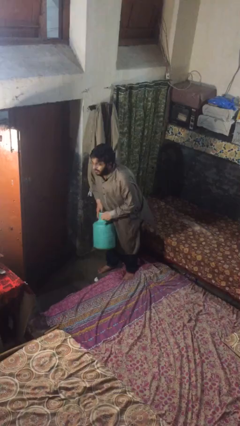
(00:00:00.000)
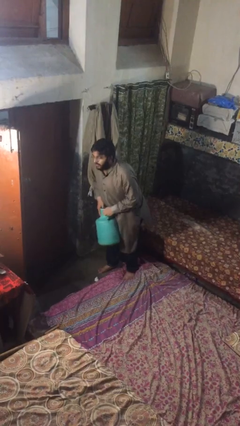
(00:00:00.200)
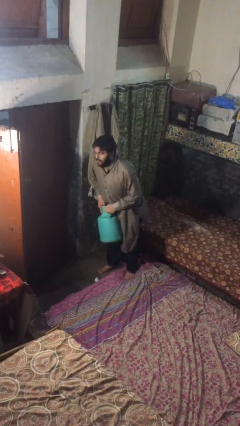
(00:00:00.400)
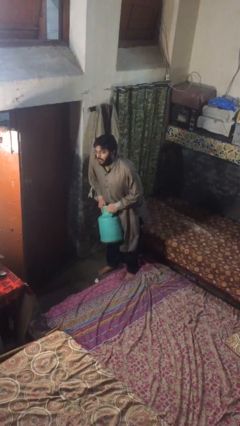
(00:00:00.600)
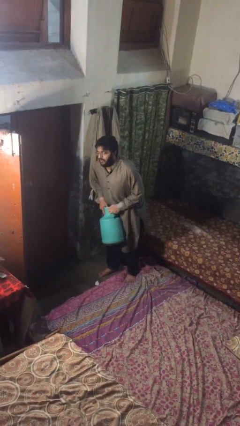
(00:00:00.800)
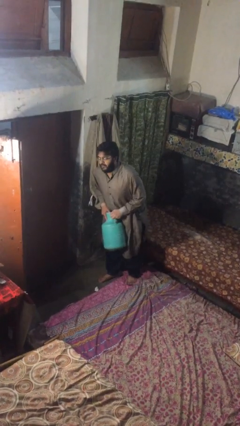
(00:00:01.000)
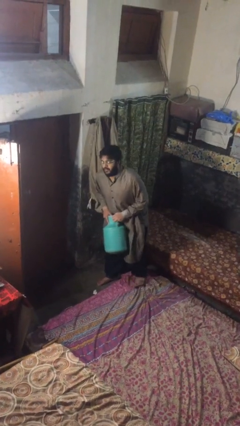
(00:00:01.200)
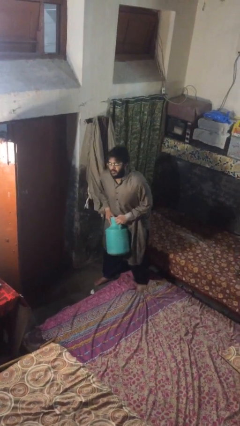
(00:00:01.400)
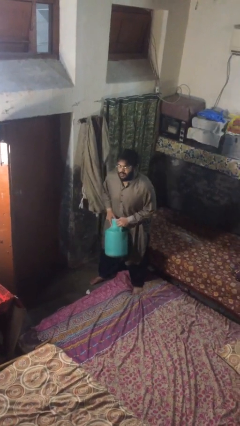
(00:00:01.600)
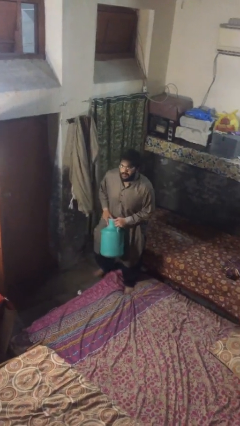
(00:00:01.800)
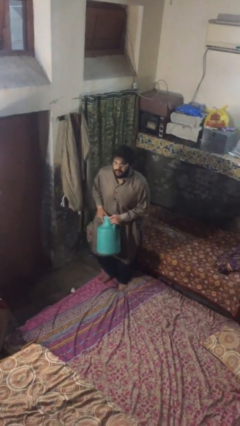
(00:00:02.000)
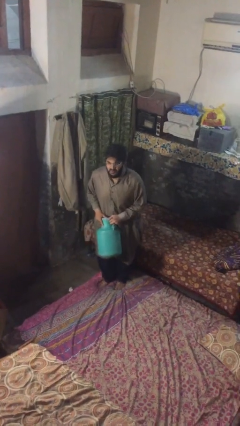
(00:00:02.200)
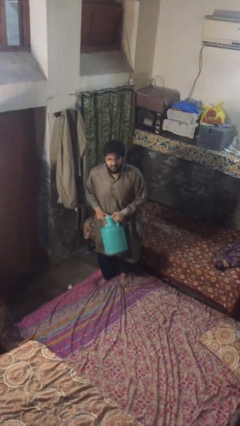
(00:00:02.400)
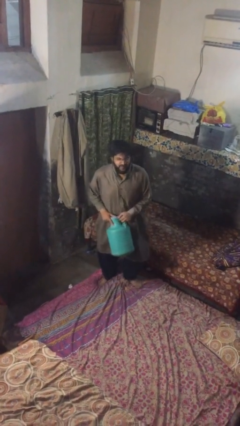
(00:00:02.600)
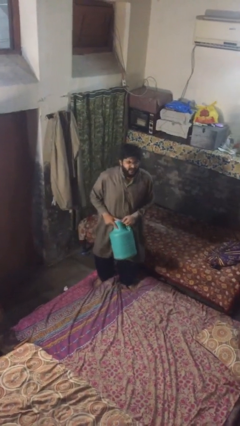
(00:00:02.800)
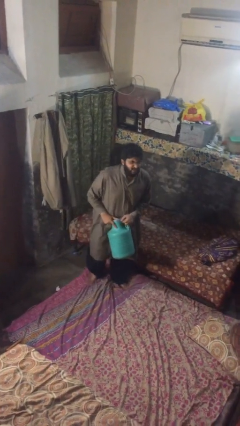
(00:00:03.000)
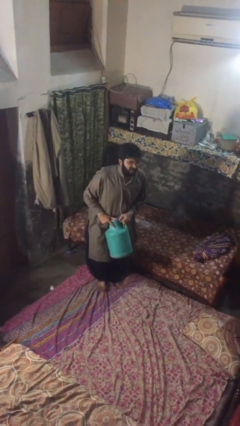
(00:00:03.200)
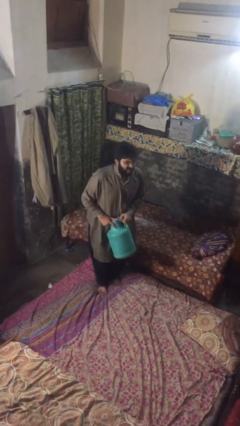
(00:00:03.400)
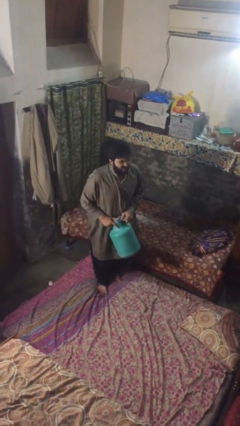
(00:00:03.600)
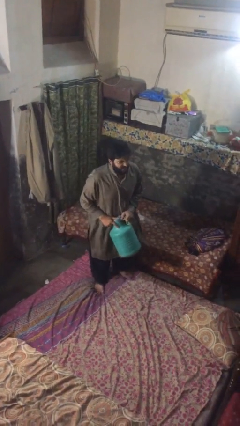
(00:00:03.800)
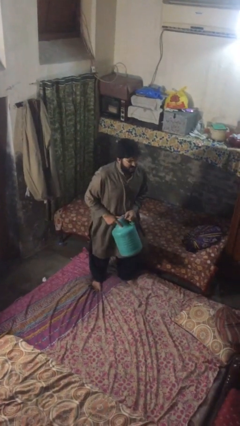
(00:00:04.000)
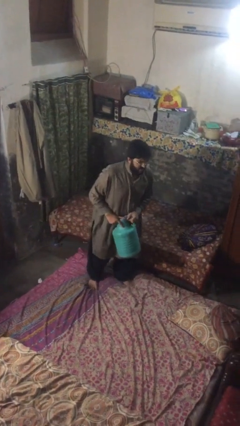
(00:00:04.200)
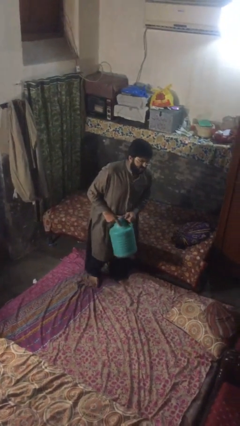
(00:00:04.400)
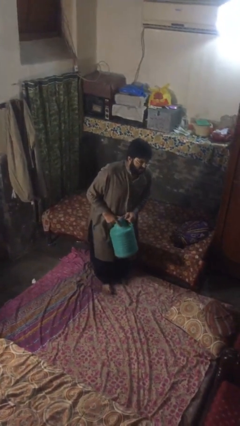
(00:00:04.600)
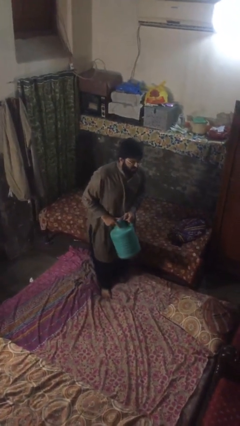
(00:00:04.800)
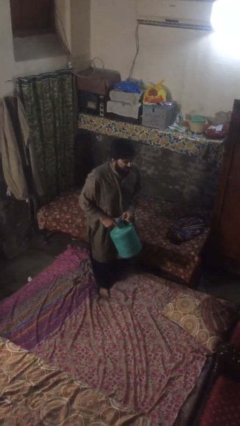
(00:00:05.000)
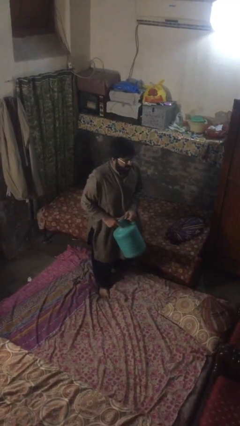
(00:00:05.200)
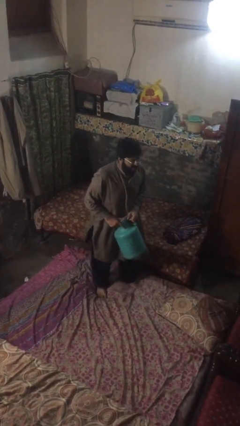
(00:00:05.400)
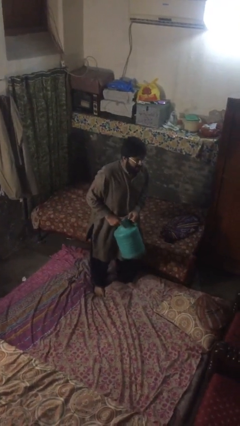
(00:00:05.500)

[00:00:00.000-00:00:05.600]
person carries heavy object

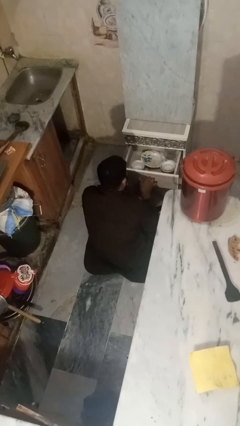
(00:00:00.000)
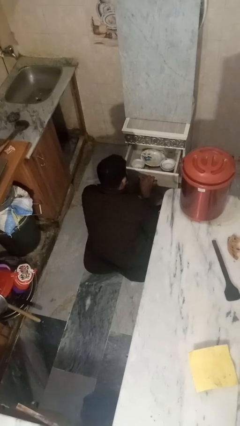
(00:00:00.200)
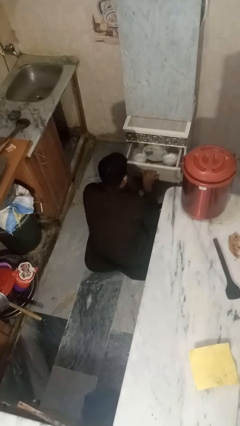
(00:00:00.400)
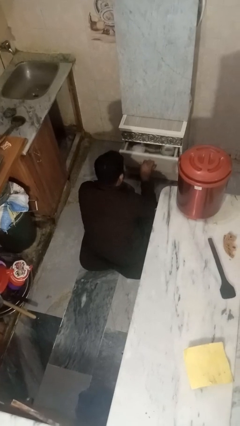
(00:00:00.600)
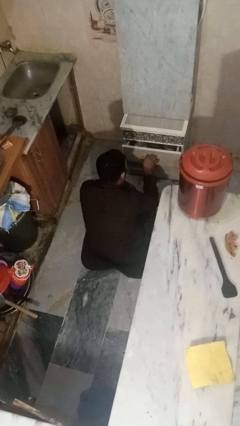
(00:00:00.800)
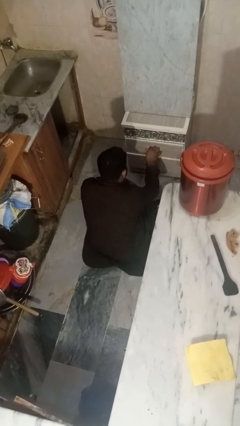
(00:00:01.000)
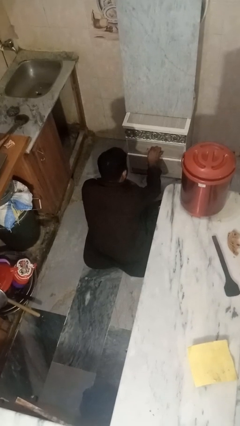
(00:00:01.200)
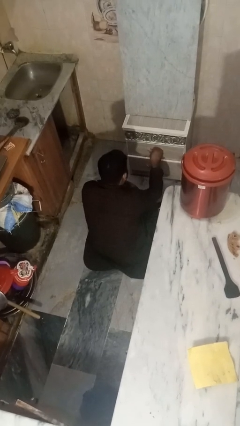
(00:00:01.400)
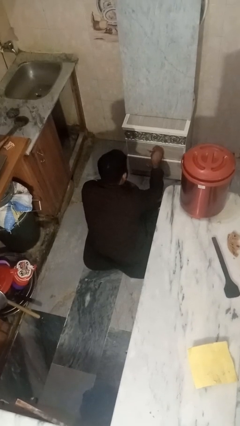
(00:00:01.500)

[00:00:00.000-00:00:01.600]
person closes kitchen drawer

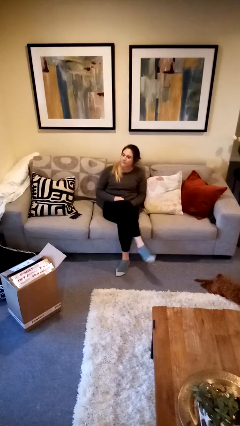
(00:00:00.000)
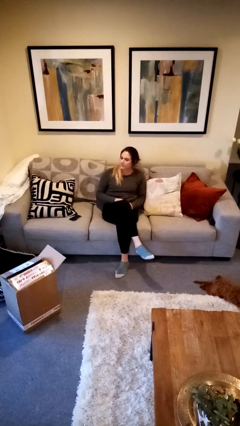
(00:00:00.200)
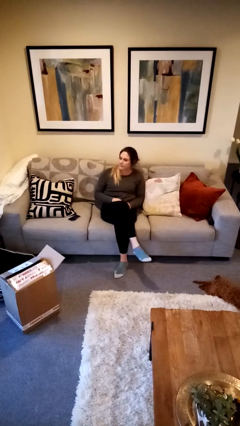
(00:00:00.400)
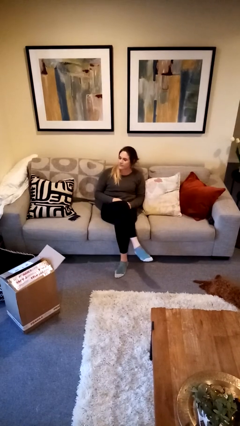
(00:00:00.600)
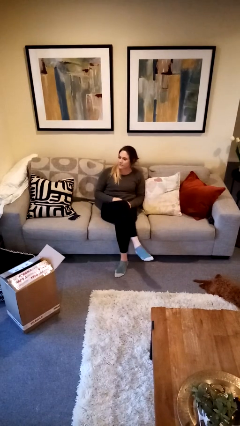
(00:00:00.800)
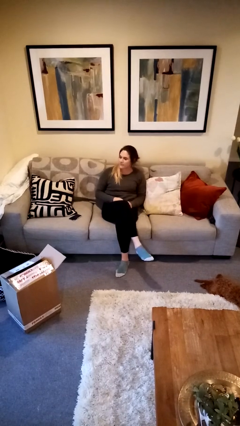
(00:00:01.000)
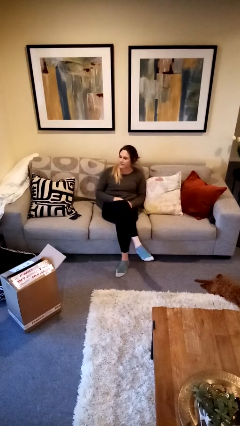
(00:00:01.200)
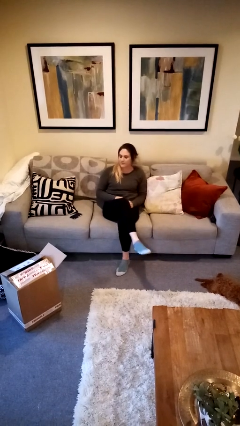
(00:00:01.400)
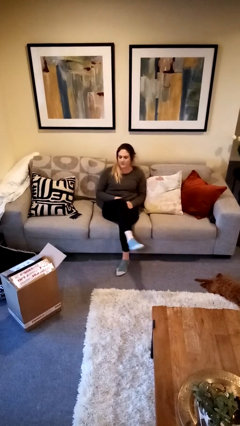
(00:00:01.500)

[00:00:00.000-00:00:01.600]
person crosses legs

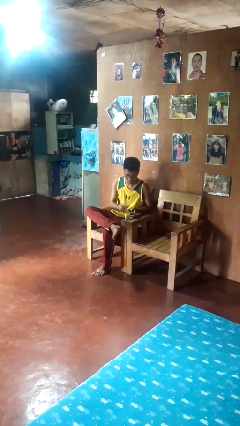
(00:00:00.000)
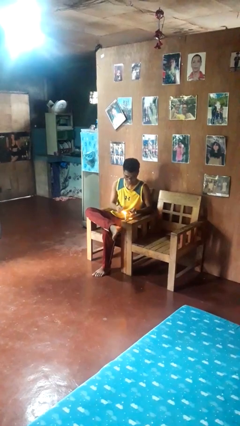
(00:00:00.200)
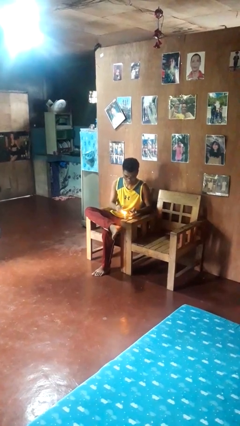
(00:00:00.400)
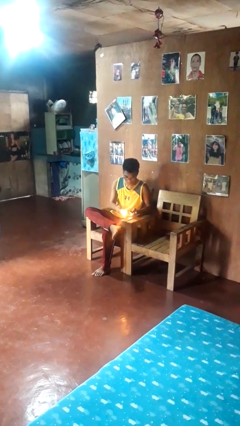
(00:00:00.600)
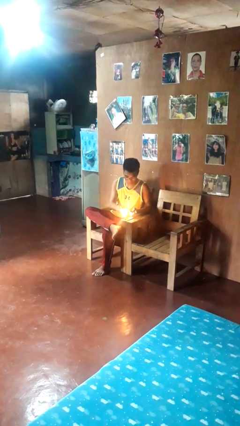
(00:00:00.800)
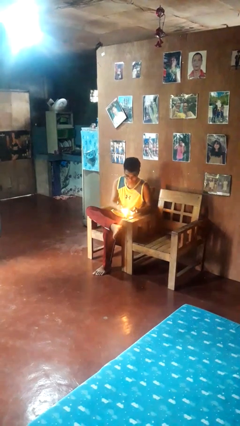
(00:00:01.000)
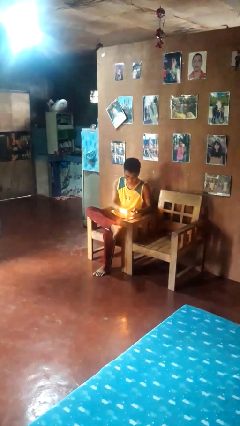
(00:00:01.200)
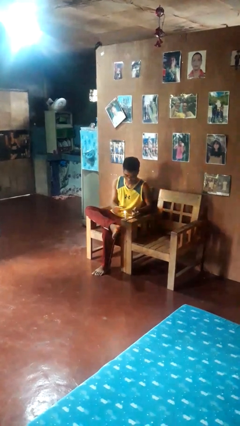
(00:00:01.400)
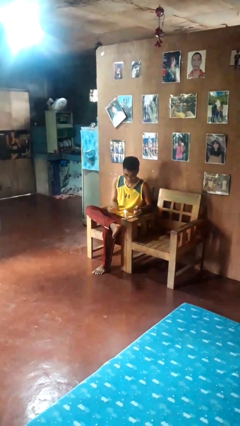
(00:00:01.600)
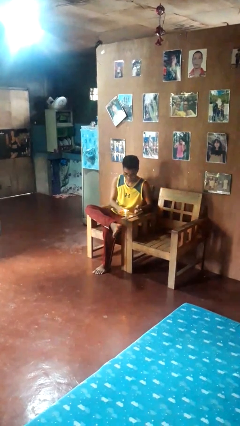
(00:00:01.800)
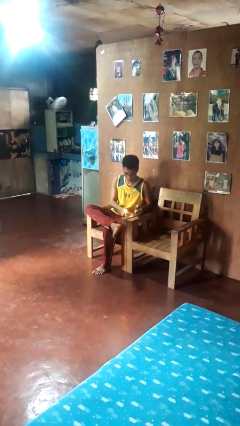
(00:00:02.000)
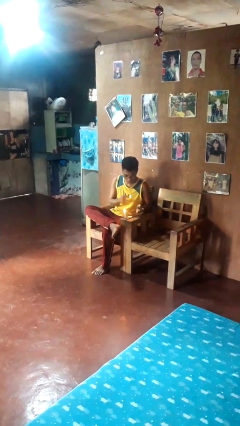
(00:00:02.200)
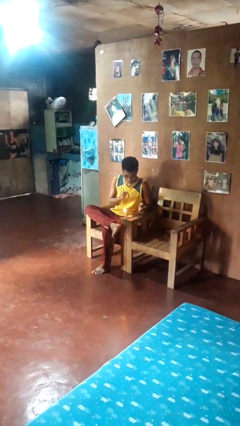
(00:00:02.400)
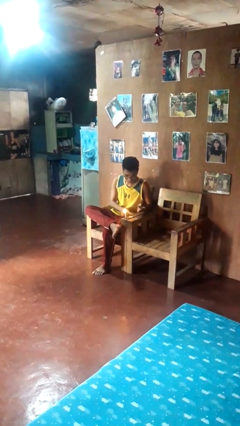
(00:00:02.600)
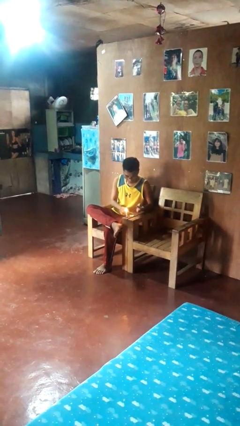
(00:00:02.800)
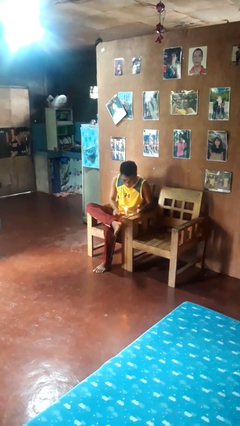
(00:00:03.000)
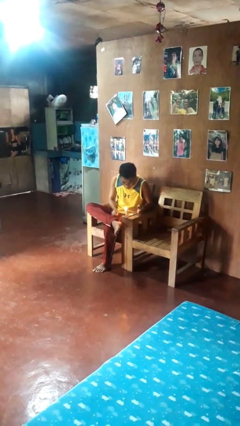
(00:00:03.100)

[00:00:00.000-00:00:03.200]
person lights candle

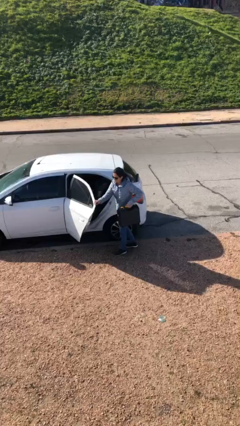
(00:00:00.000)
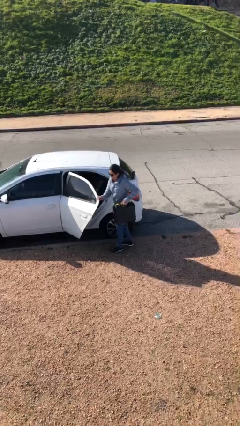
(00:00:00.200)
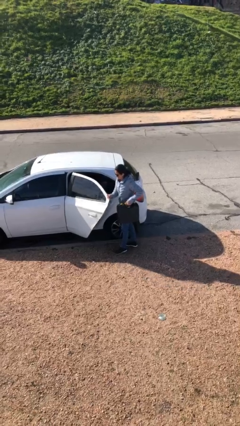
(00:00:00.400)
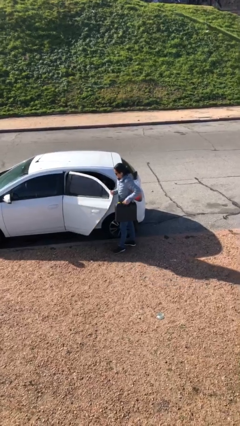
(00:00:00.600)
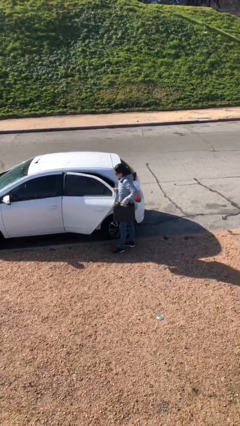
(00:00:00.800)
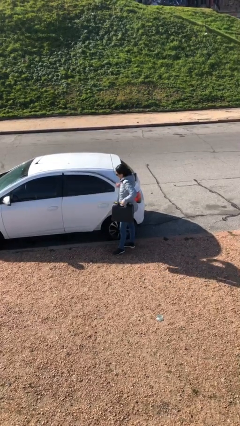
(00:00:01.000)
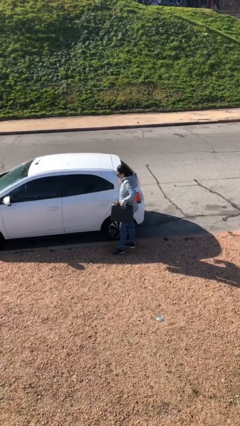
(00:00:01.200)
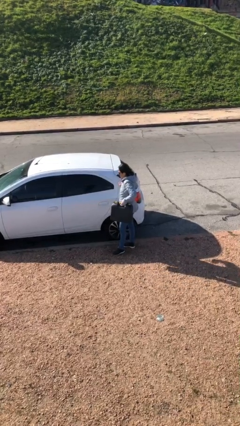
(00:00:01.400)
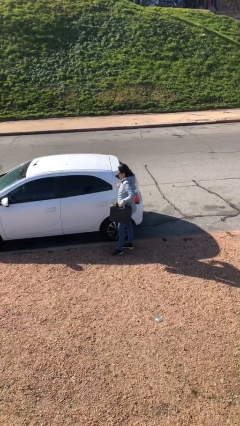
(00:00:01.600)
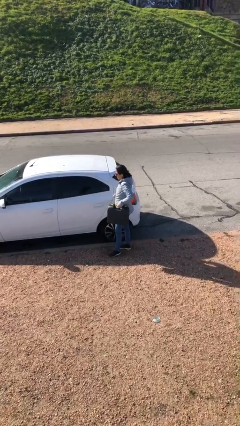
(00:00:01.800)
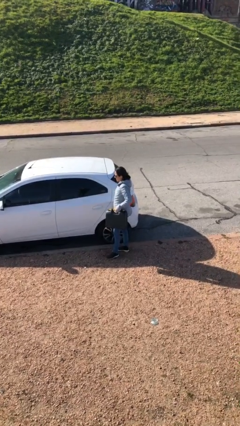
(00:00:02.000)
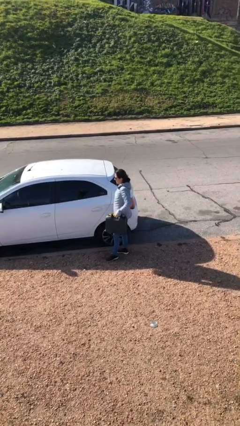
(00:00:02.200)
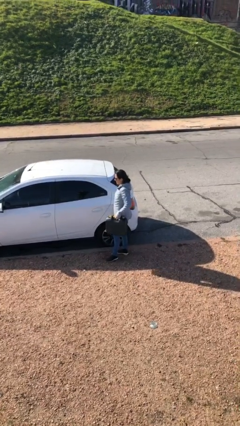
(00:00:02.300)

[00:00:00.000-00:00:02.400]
person closes car door

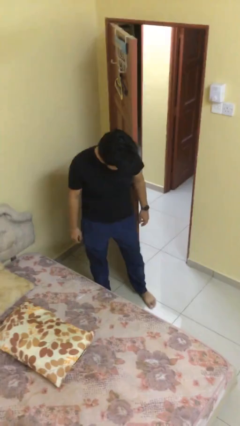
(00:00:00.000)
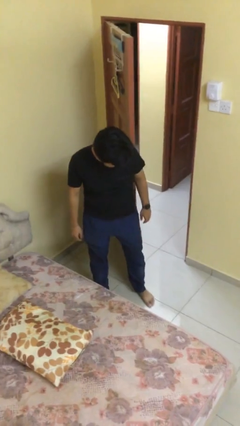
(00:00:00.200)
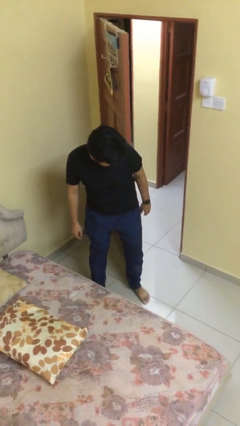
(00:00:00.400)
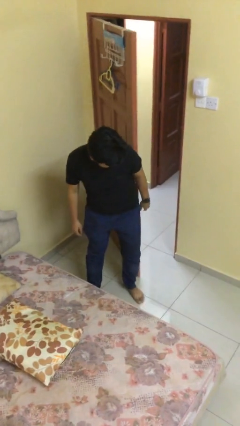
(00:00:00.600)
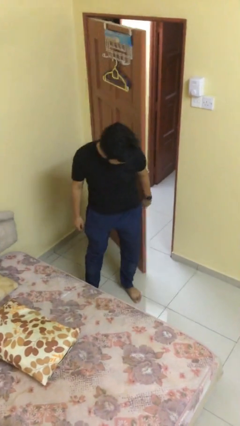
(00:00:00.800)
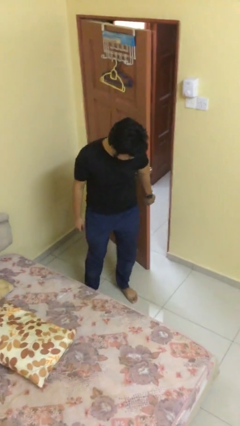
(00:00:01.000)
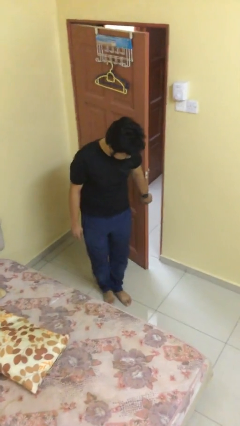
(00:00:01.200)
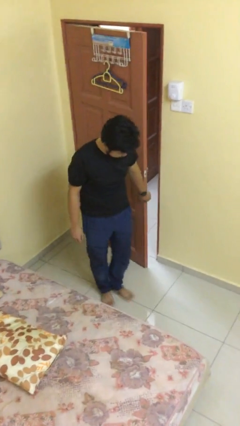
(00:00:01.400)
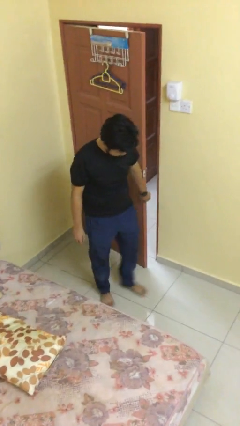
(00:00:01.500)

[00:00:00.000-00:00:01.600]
person closes door with hip

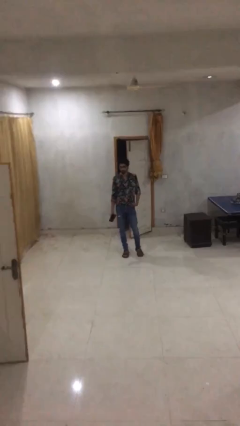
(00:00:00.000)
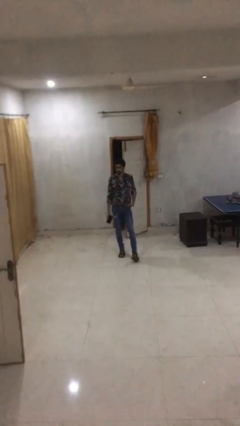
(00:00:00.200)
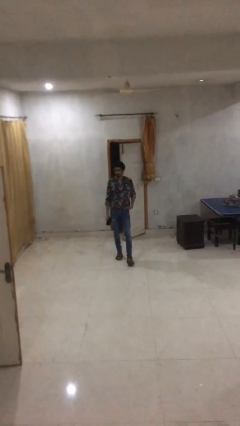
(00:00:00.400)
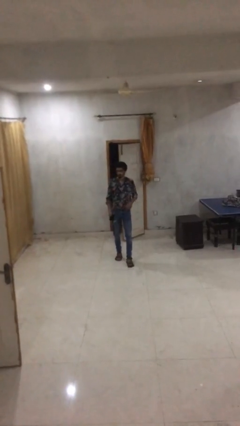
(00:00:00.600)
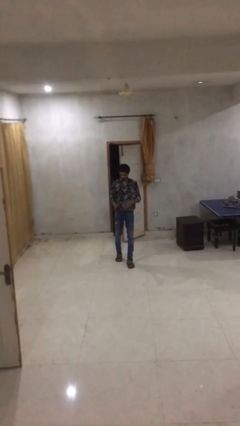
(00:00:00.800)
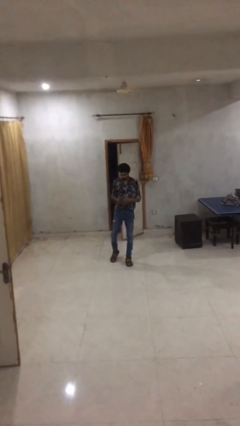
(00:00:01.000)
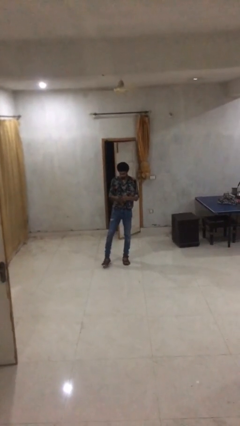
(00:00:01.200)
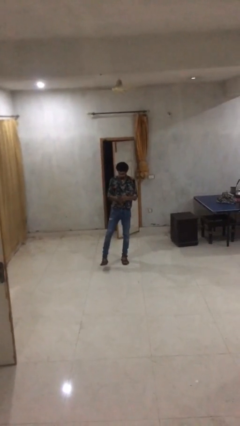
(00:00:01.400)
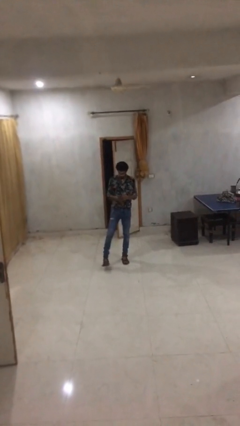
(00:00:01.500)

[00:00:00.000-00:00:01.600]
person texts on phone
